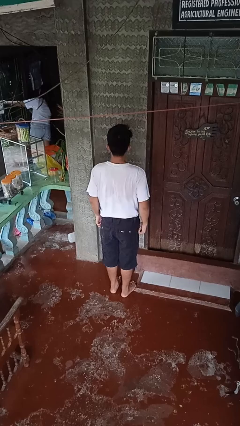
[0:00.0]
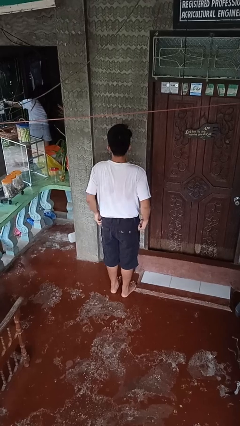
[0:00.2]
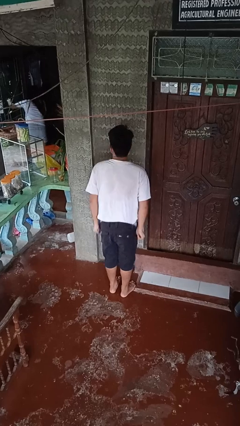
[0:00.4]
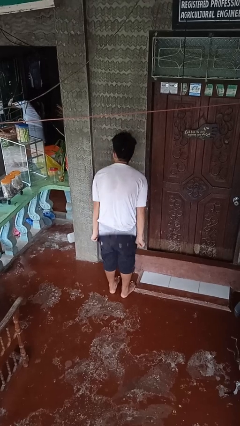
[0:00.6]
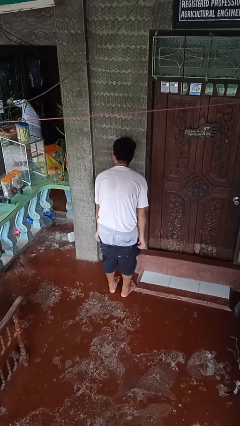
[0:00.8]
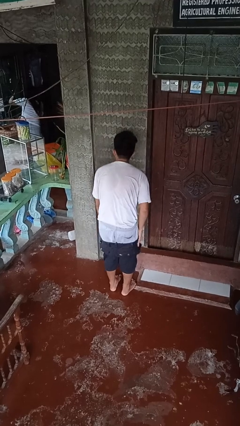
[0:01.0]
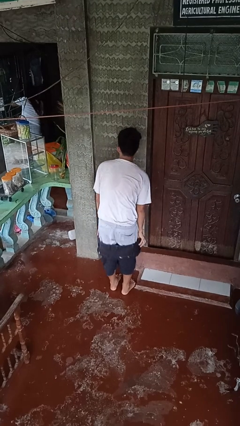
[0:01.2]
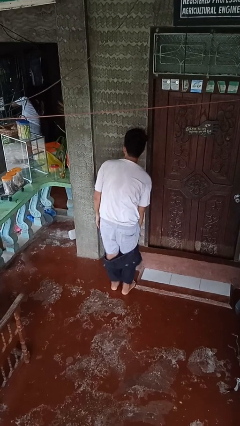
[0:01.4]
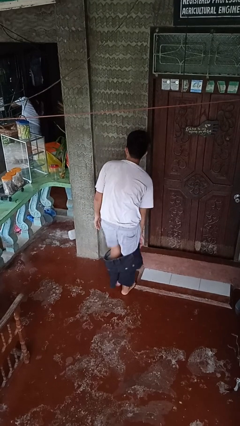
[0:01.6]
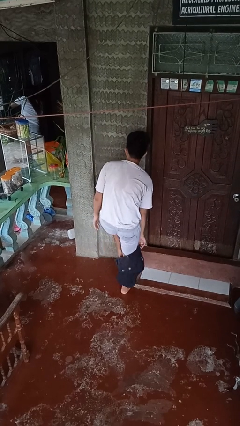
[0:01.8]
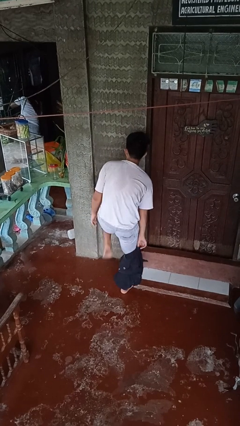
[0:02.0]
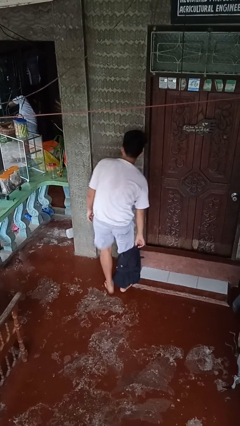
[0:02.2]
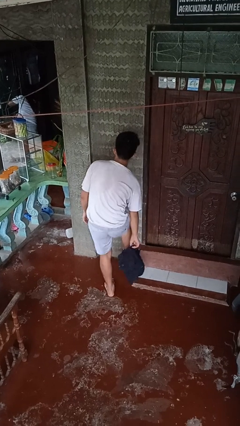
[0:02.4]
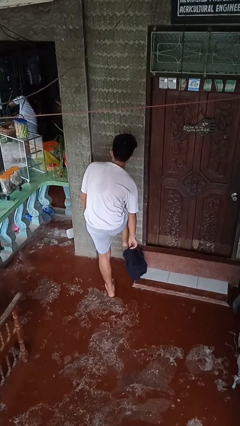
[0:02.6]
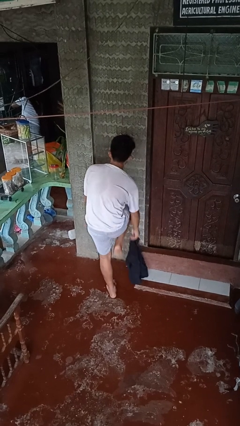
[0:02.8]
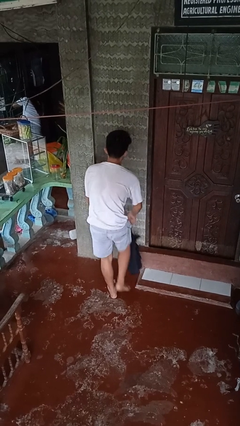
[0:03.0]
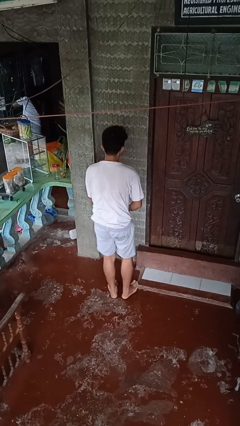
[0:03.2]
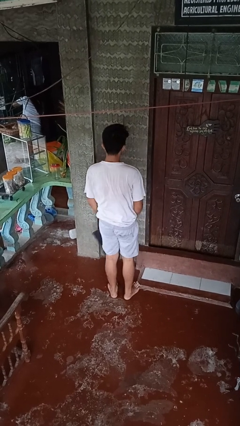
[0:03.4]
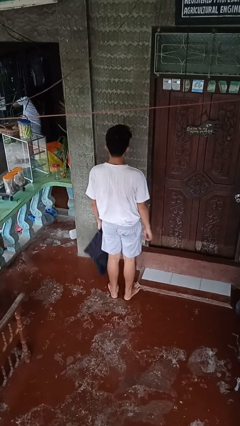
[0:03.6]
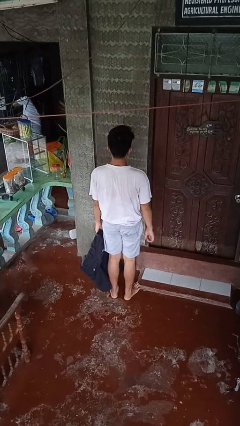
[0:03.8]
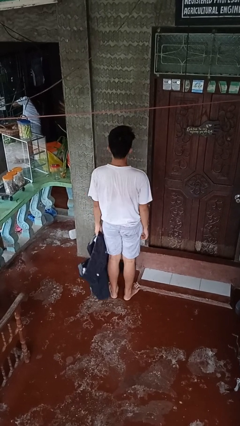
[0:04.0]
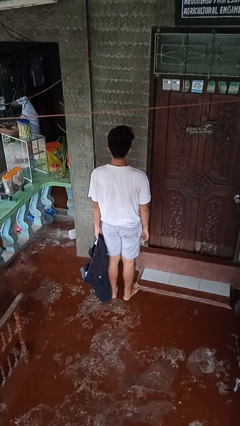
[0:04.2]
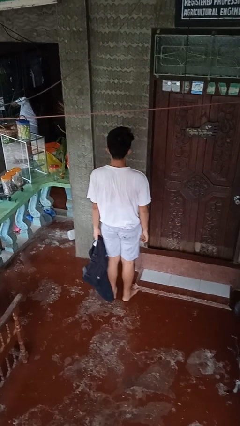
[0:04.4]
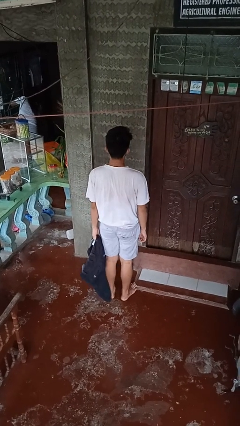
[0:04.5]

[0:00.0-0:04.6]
person takes off pants

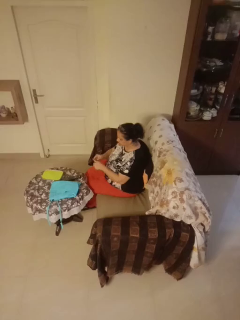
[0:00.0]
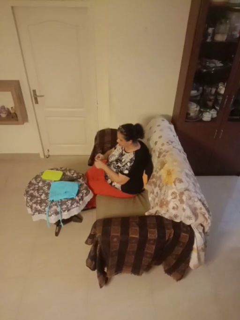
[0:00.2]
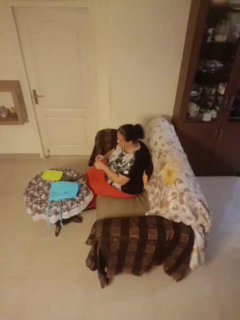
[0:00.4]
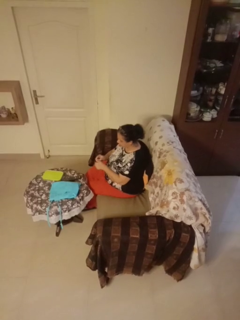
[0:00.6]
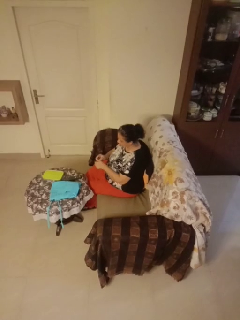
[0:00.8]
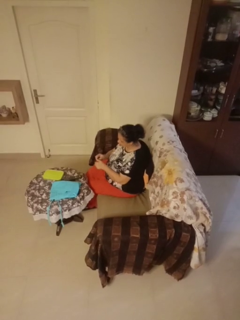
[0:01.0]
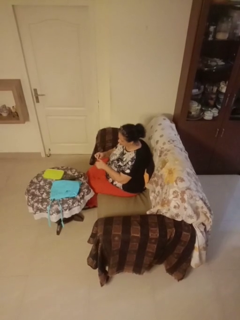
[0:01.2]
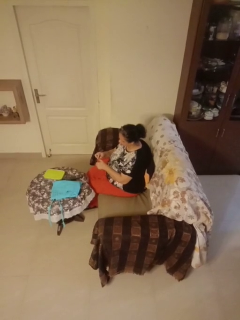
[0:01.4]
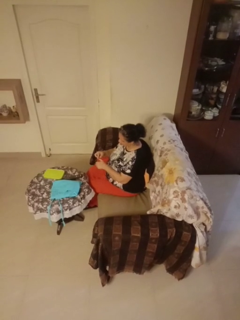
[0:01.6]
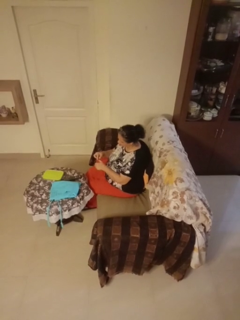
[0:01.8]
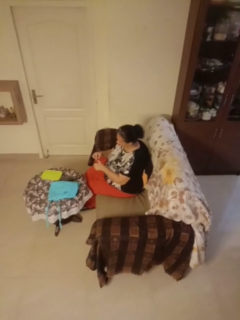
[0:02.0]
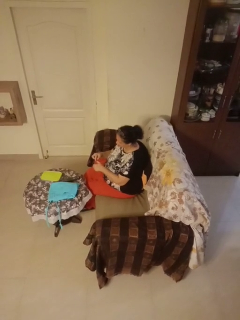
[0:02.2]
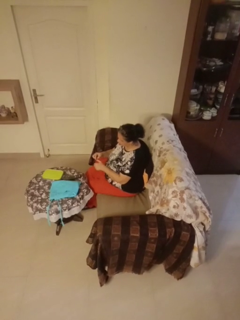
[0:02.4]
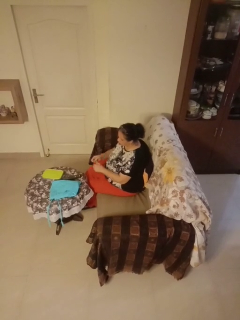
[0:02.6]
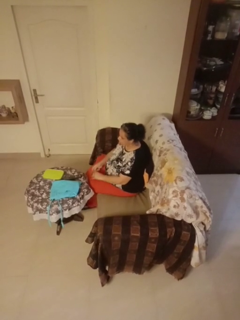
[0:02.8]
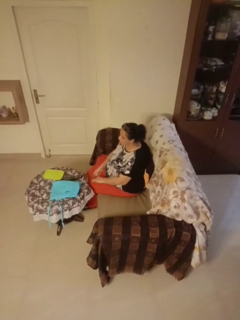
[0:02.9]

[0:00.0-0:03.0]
person files fingernails

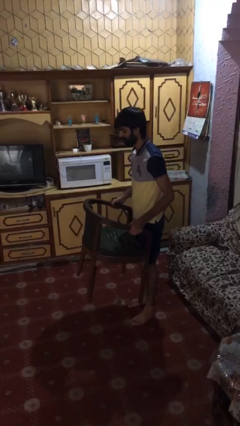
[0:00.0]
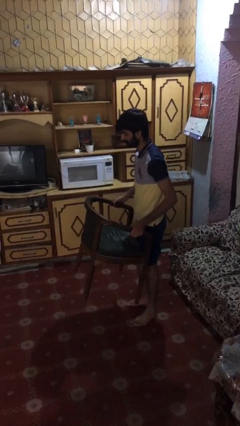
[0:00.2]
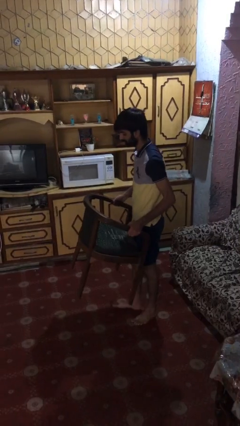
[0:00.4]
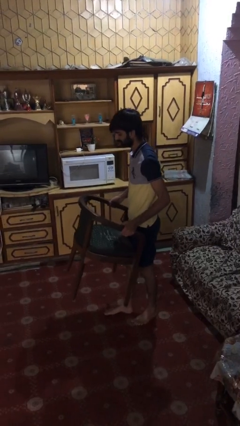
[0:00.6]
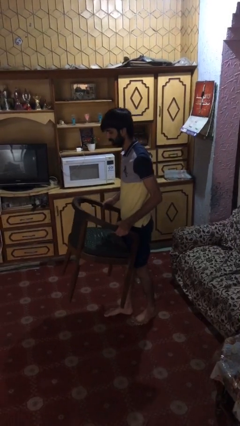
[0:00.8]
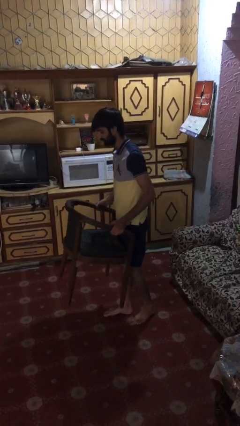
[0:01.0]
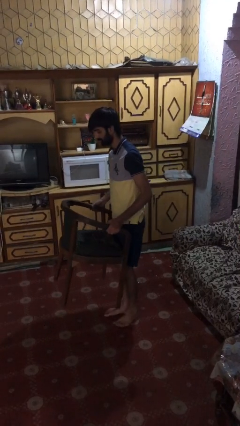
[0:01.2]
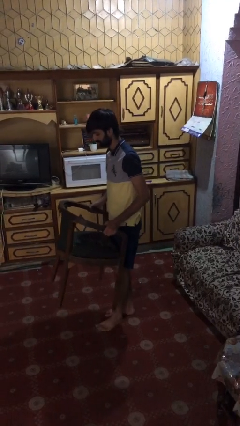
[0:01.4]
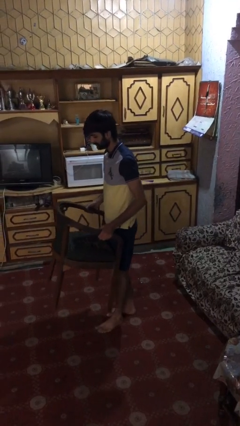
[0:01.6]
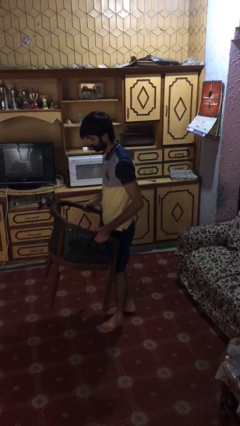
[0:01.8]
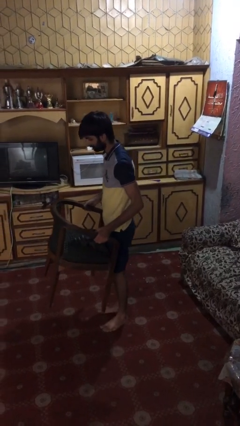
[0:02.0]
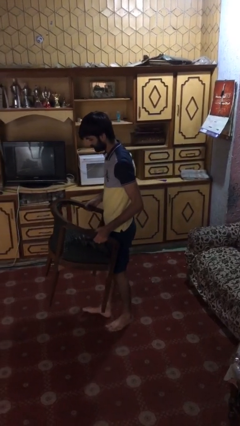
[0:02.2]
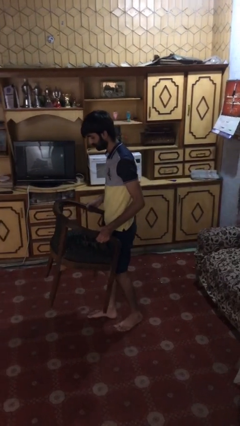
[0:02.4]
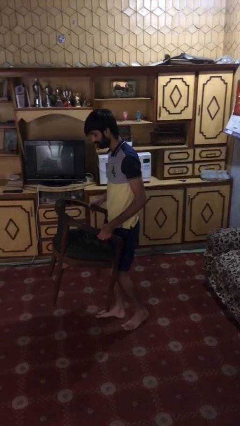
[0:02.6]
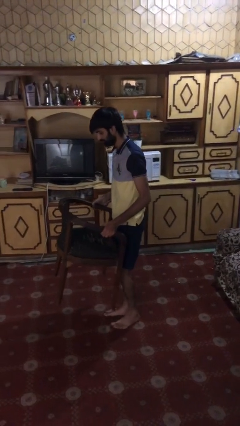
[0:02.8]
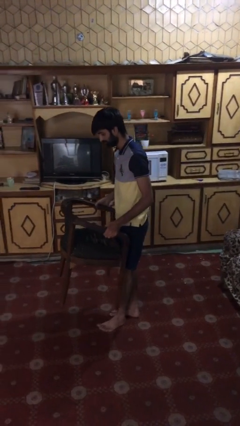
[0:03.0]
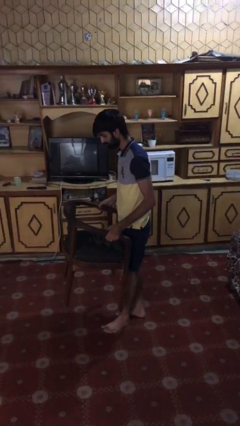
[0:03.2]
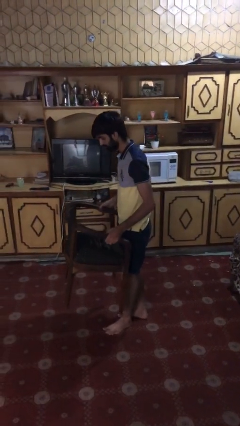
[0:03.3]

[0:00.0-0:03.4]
person carries heavy object

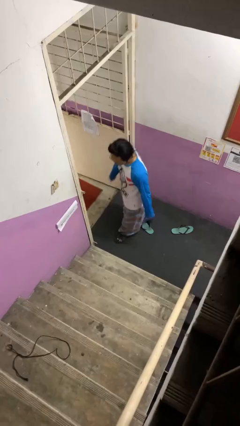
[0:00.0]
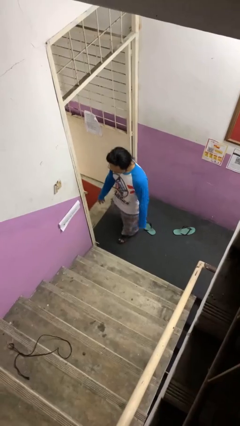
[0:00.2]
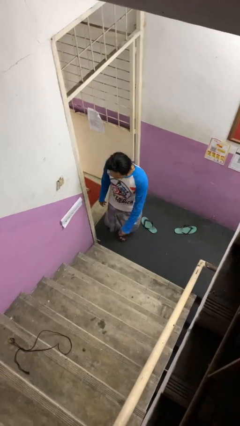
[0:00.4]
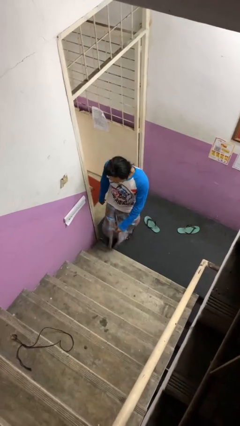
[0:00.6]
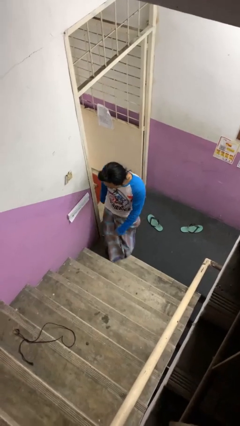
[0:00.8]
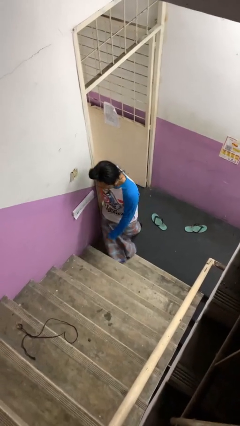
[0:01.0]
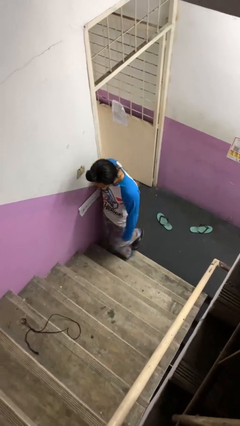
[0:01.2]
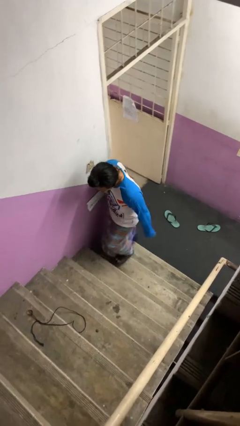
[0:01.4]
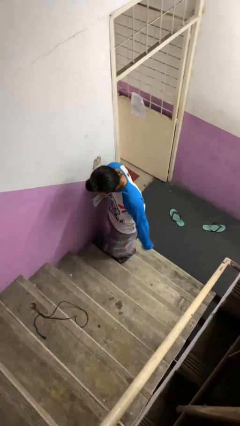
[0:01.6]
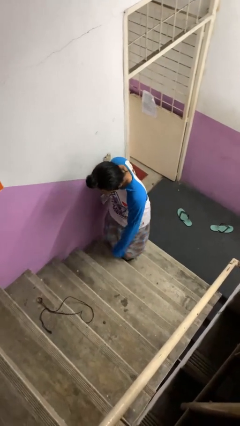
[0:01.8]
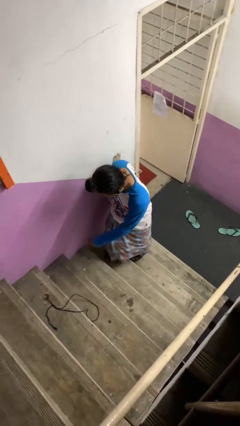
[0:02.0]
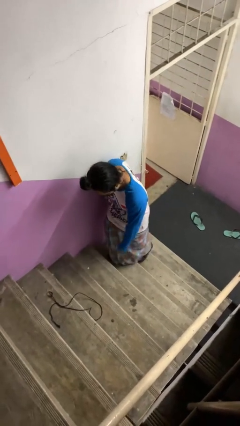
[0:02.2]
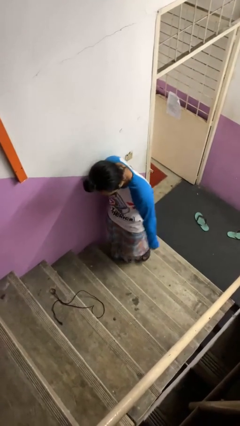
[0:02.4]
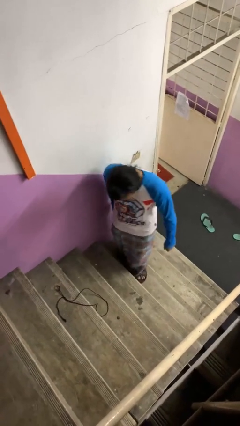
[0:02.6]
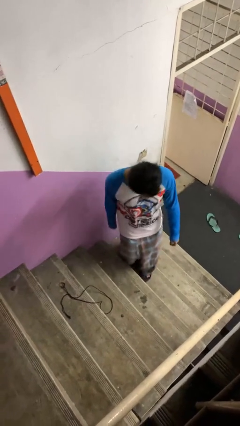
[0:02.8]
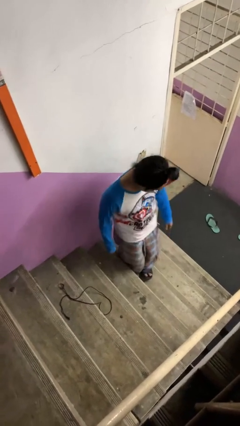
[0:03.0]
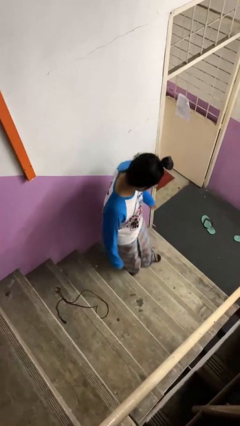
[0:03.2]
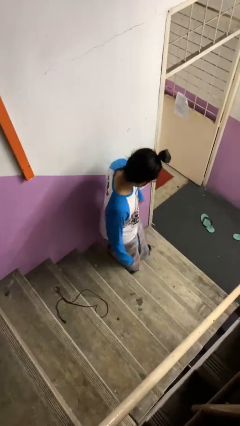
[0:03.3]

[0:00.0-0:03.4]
person climbs up stairs

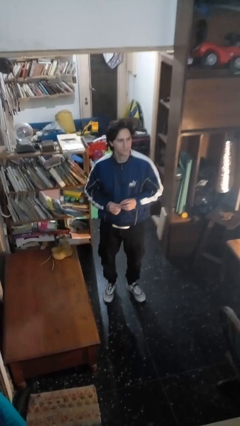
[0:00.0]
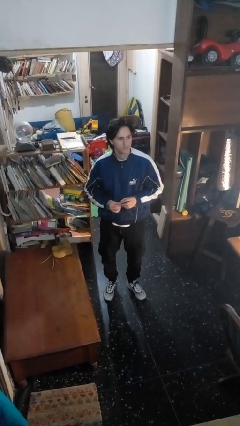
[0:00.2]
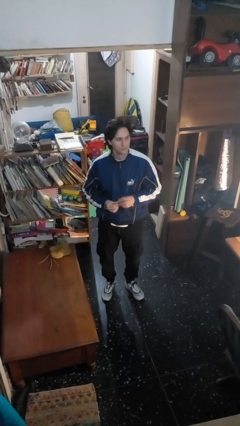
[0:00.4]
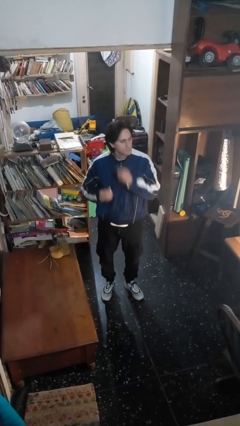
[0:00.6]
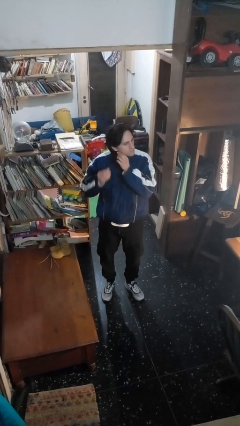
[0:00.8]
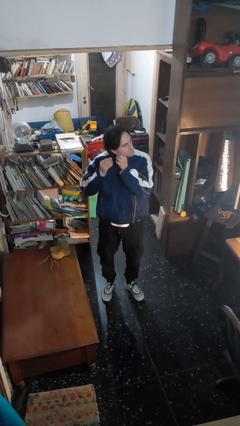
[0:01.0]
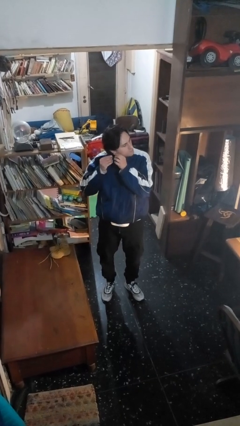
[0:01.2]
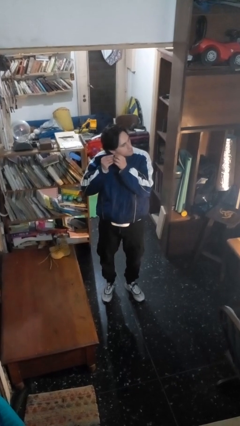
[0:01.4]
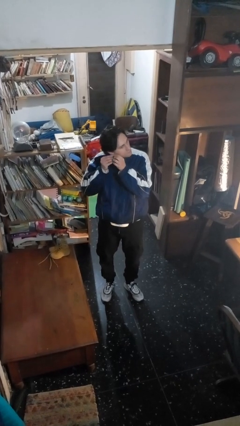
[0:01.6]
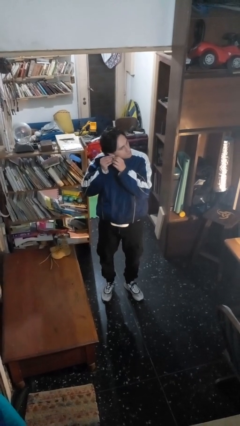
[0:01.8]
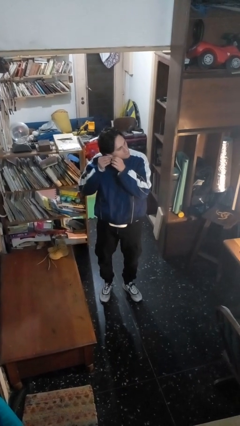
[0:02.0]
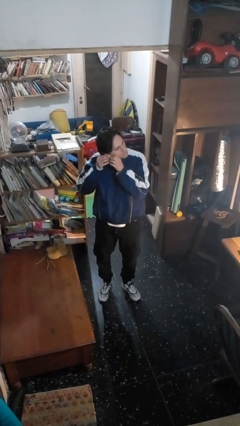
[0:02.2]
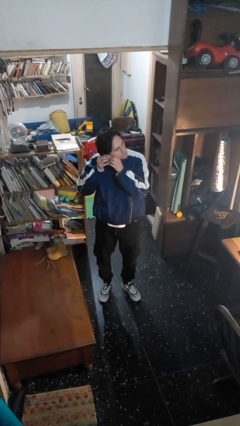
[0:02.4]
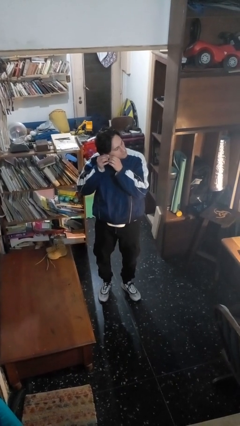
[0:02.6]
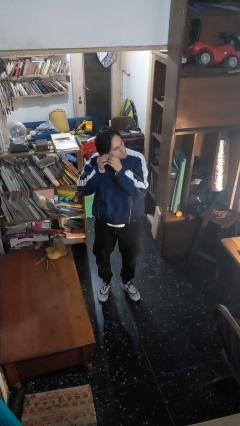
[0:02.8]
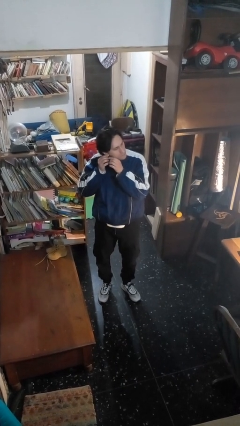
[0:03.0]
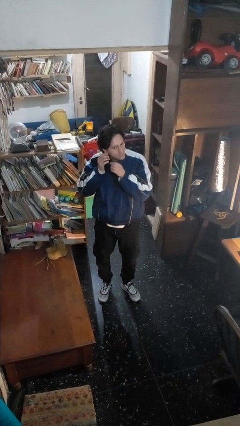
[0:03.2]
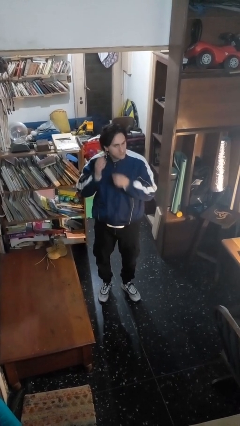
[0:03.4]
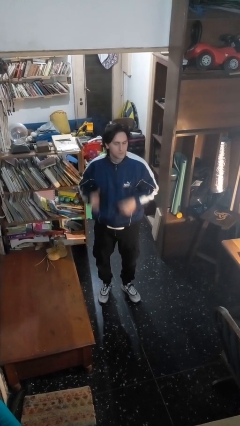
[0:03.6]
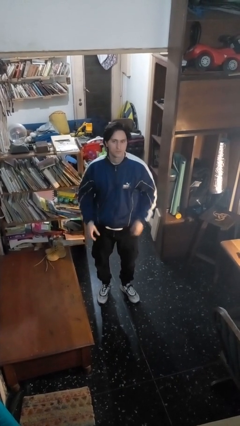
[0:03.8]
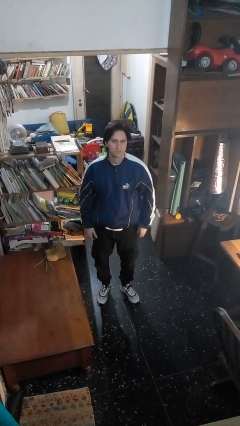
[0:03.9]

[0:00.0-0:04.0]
person puts on earrings
